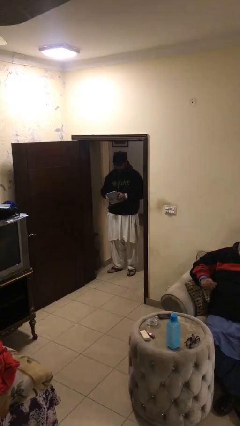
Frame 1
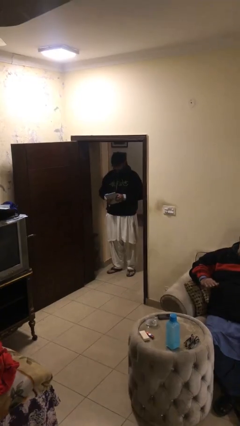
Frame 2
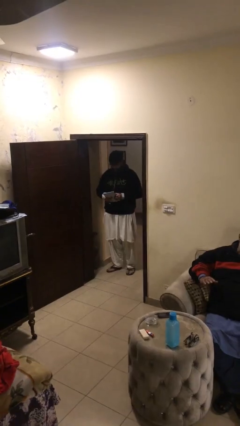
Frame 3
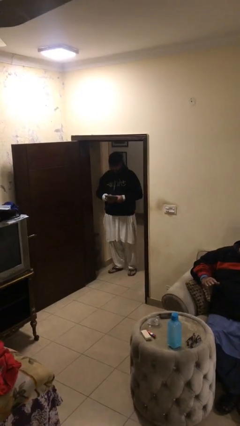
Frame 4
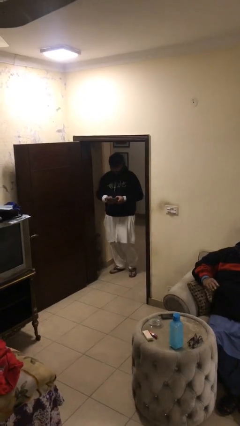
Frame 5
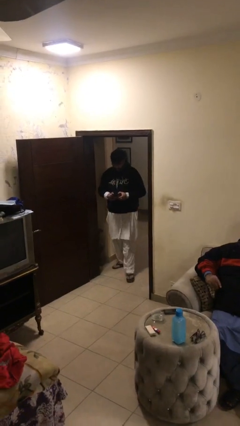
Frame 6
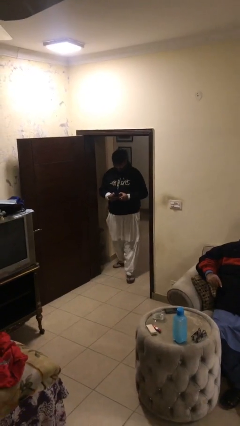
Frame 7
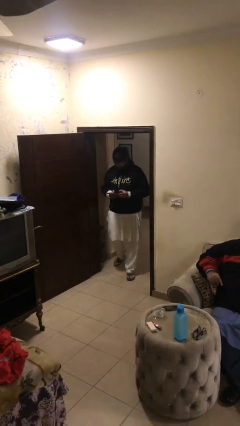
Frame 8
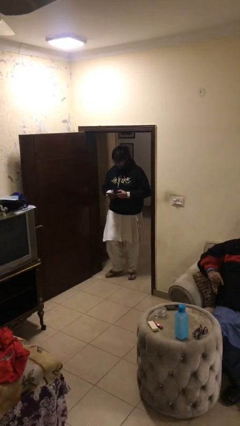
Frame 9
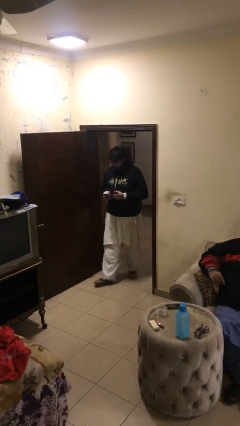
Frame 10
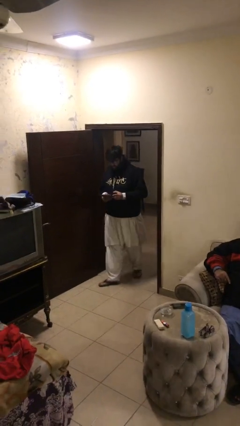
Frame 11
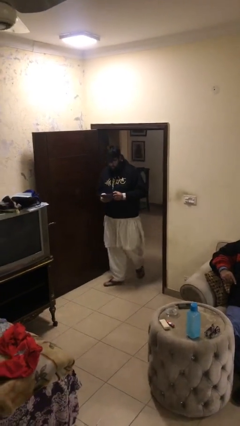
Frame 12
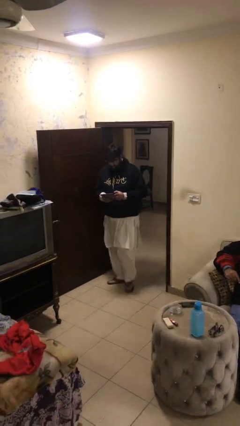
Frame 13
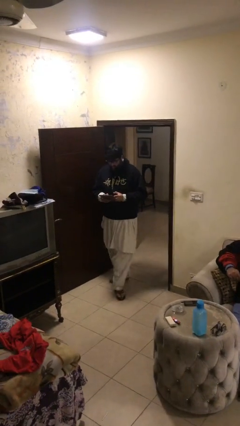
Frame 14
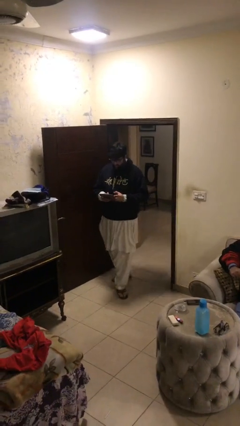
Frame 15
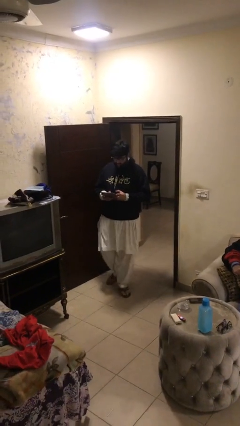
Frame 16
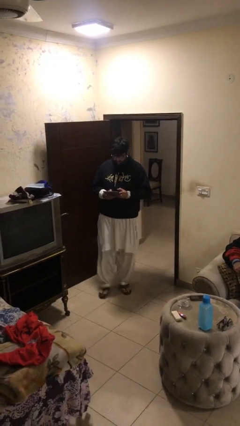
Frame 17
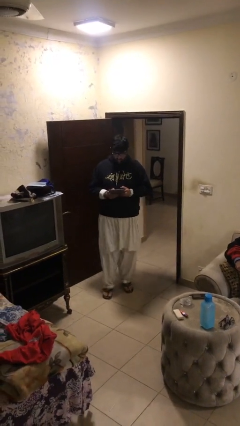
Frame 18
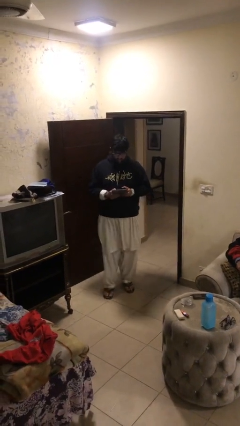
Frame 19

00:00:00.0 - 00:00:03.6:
person enters scene through structure

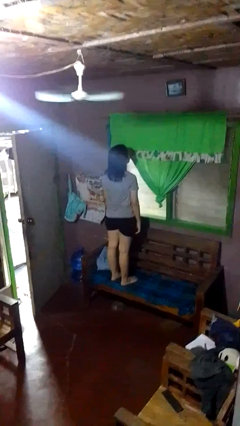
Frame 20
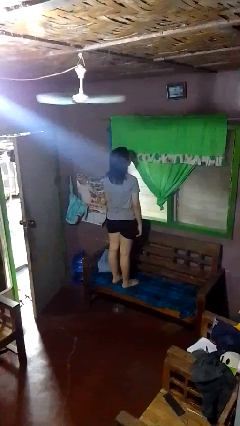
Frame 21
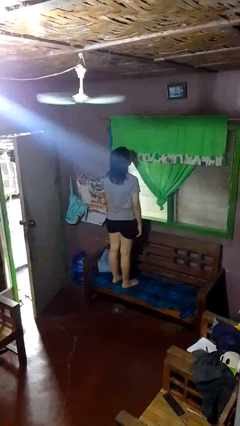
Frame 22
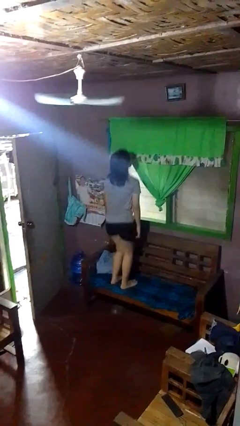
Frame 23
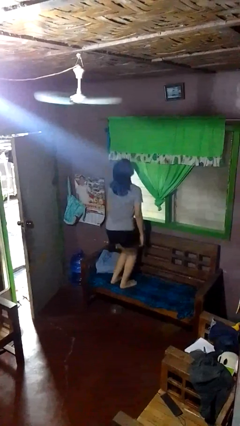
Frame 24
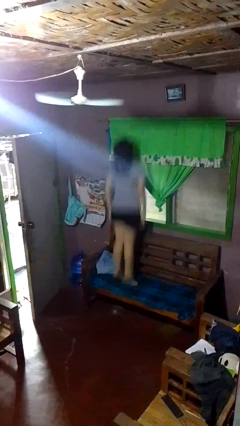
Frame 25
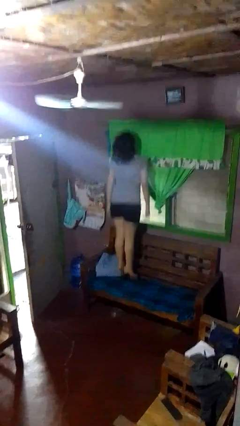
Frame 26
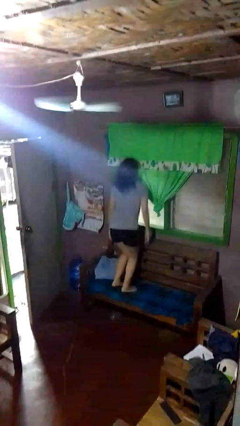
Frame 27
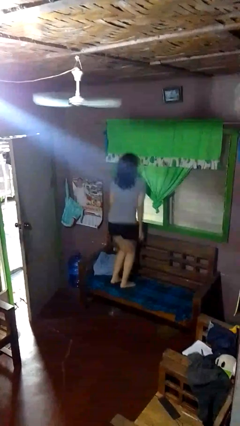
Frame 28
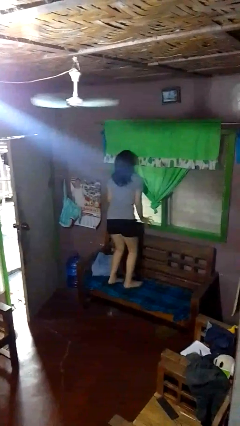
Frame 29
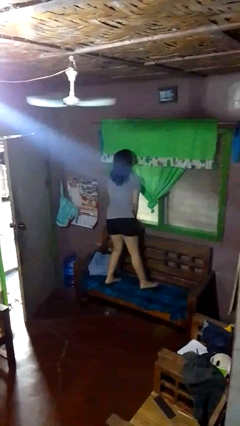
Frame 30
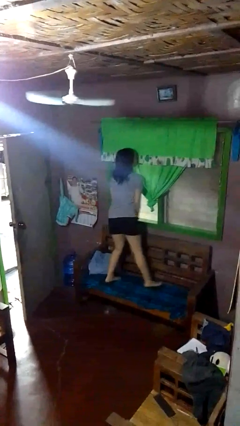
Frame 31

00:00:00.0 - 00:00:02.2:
person jumps on couch

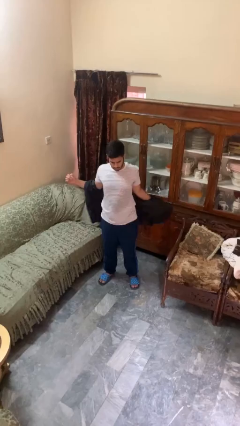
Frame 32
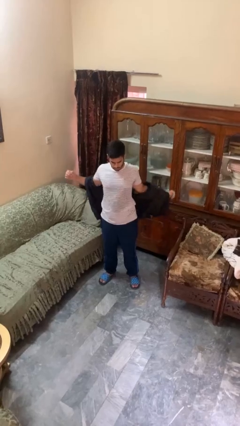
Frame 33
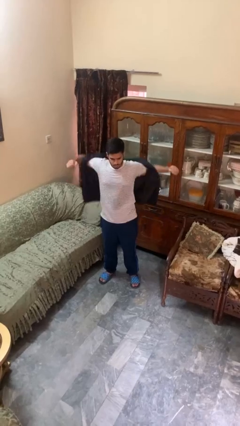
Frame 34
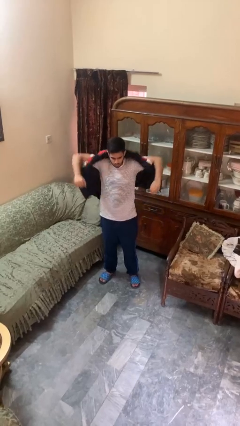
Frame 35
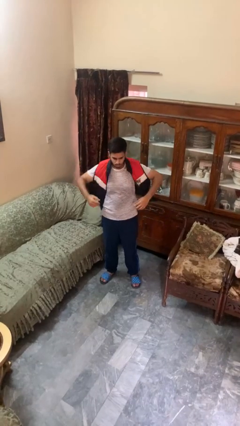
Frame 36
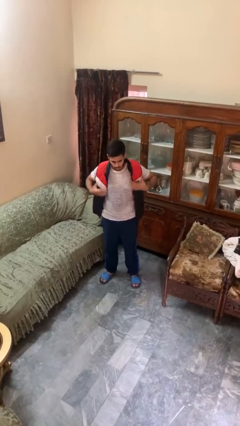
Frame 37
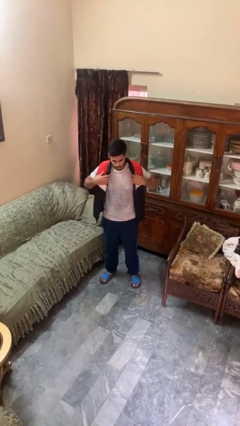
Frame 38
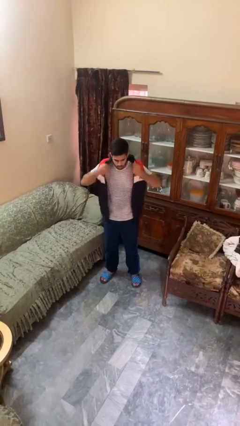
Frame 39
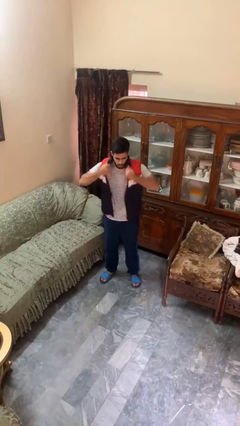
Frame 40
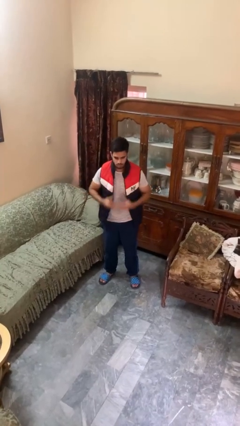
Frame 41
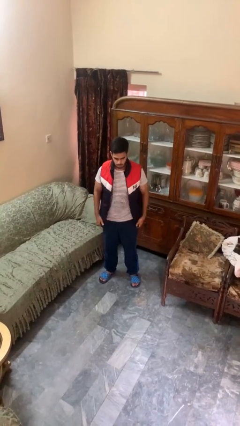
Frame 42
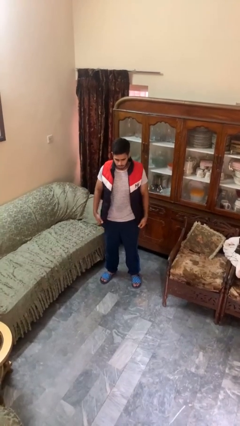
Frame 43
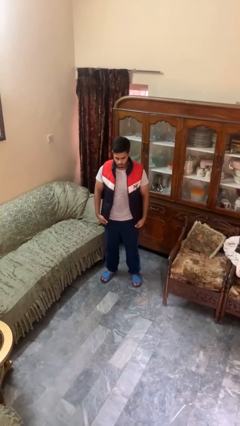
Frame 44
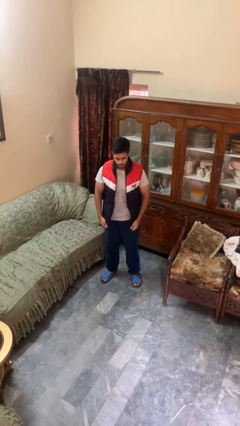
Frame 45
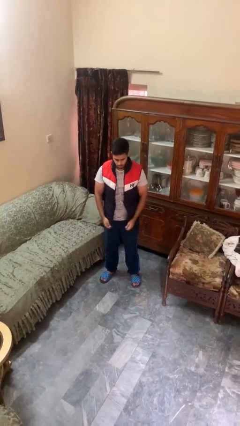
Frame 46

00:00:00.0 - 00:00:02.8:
person puts on jacket

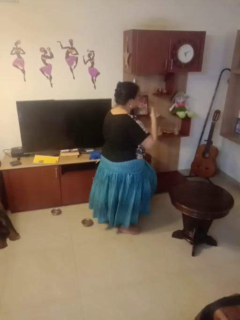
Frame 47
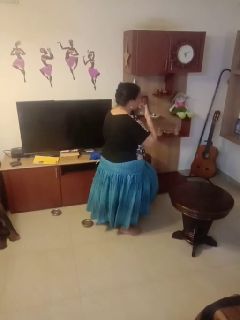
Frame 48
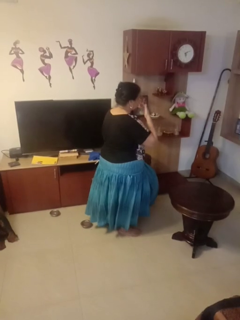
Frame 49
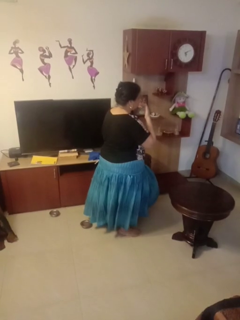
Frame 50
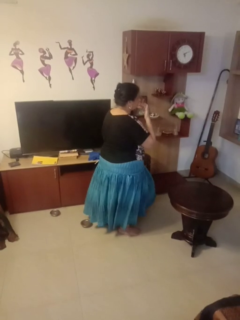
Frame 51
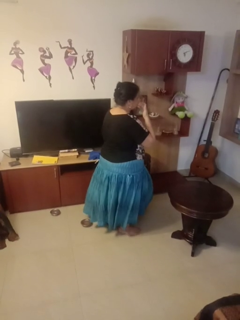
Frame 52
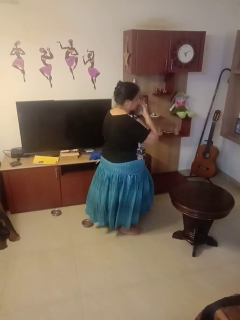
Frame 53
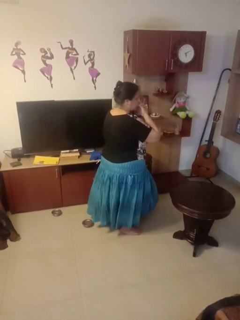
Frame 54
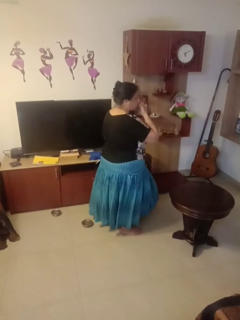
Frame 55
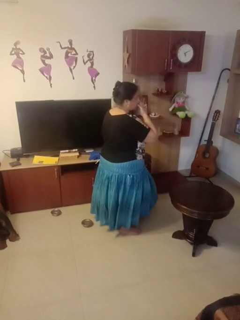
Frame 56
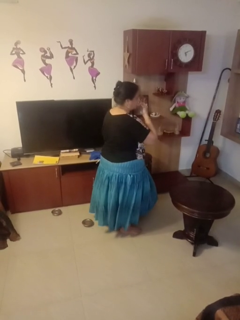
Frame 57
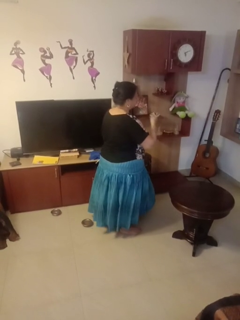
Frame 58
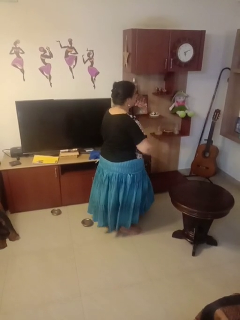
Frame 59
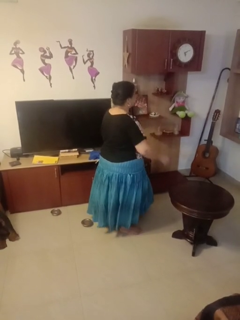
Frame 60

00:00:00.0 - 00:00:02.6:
person licks fingers

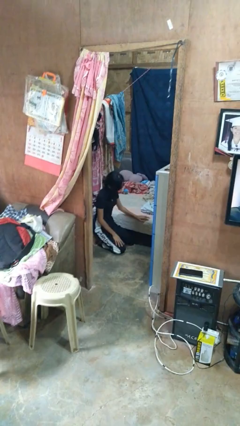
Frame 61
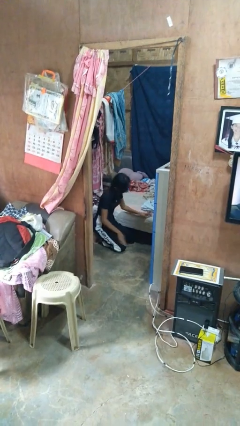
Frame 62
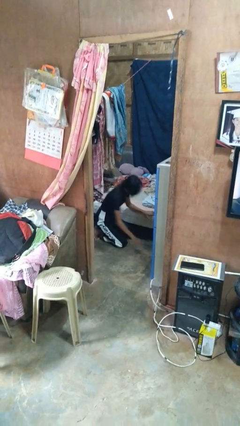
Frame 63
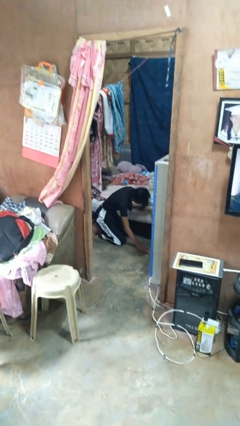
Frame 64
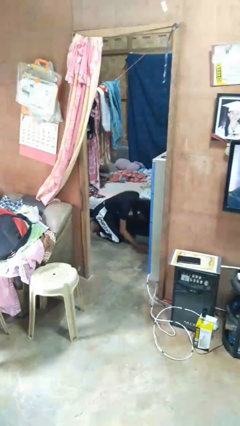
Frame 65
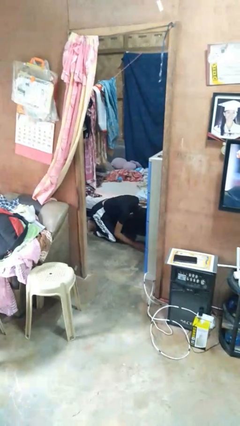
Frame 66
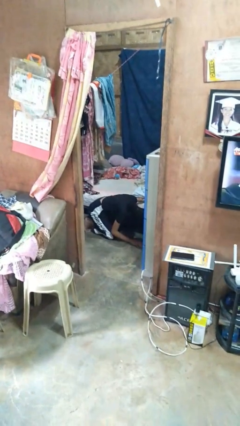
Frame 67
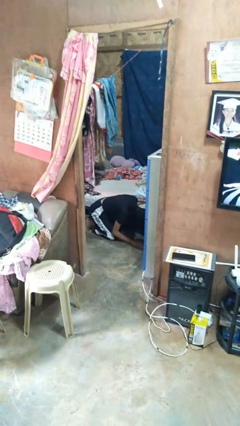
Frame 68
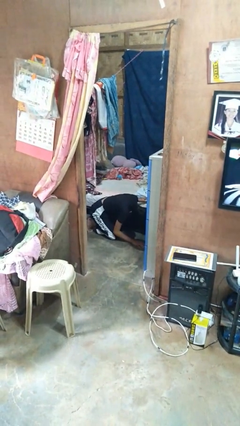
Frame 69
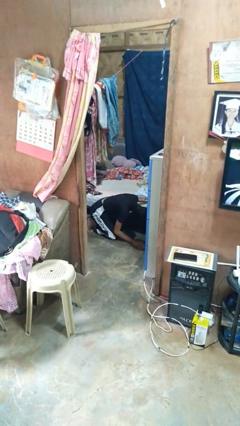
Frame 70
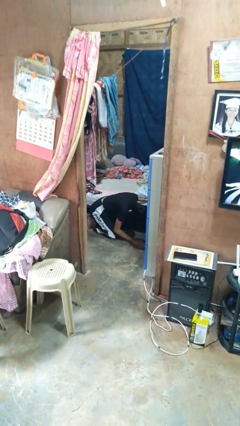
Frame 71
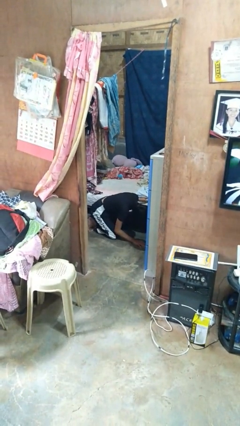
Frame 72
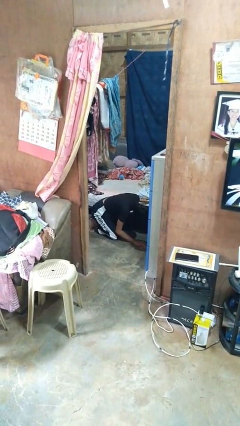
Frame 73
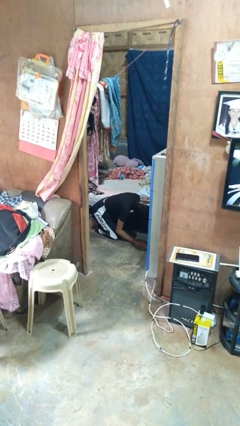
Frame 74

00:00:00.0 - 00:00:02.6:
person searches under bed

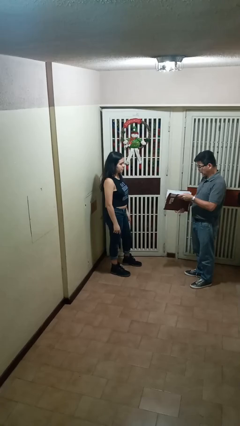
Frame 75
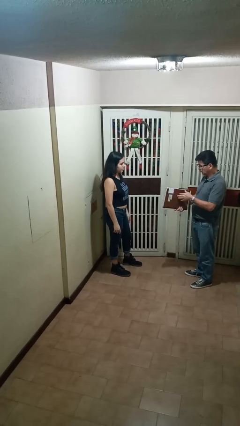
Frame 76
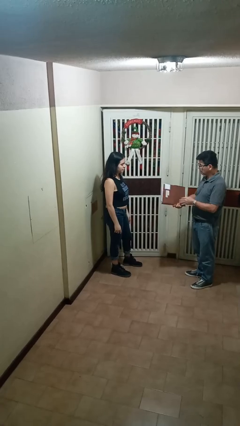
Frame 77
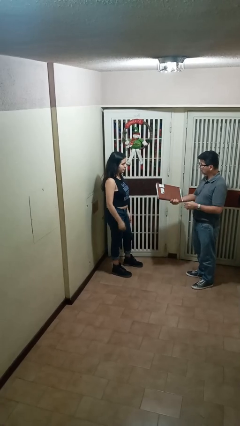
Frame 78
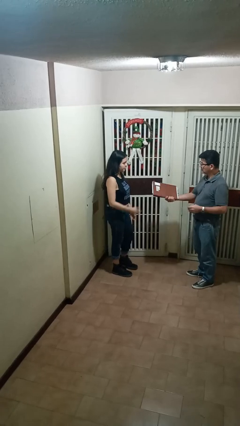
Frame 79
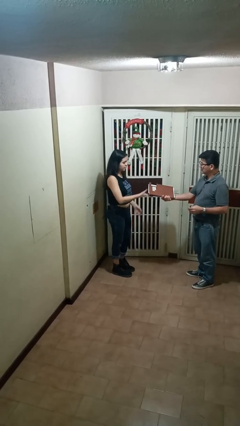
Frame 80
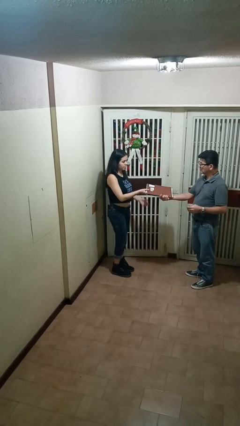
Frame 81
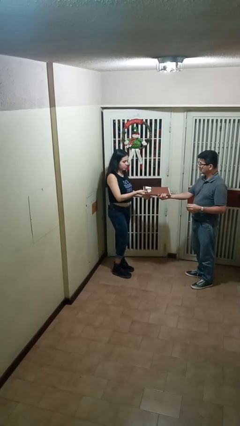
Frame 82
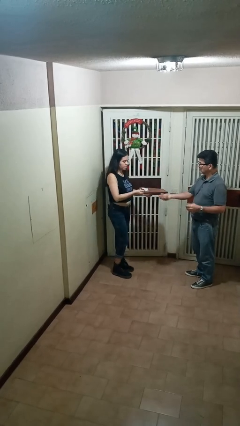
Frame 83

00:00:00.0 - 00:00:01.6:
person transfers object to person

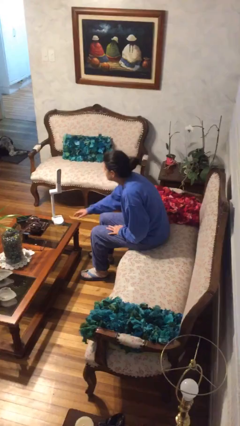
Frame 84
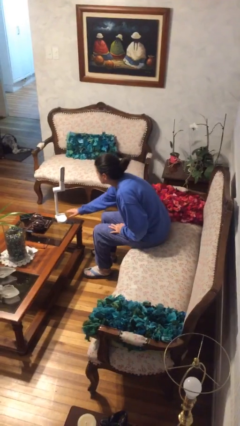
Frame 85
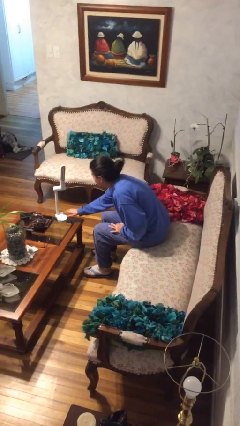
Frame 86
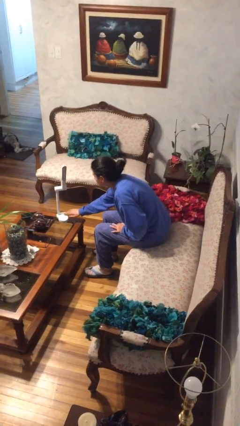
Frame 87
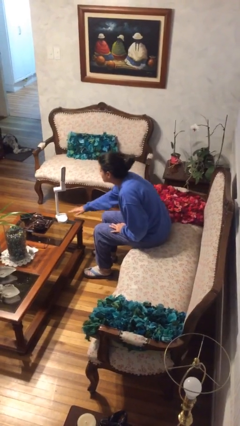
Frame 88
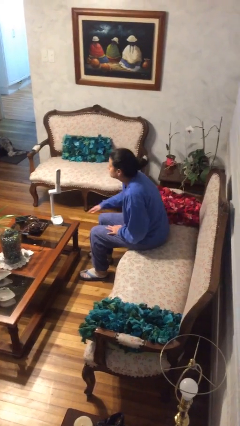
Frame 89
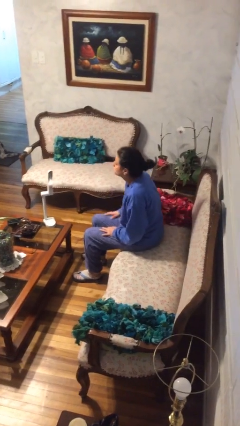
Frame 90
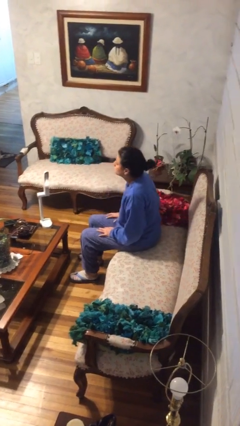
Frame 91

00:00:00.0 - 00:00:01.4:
person turns on lamp

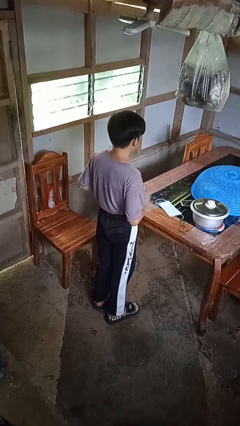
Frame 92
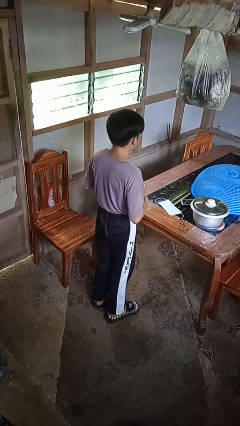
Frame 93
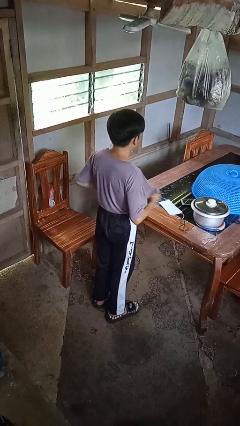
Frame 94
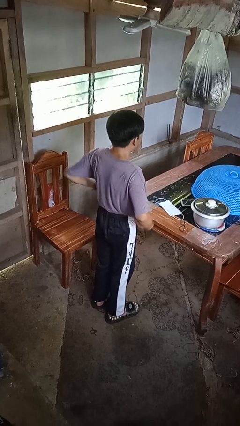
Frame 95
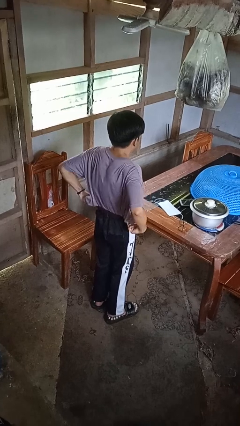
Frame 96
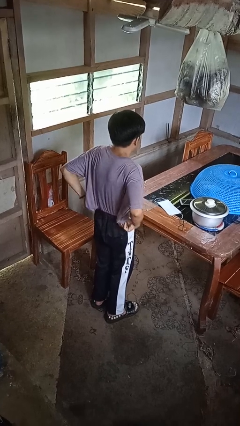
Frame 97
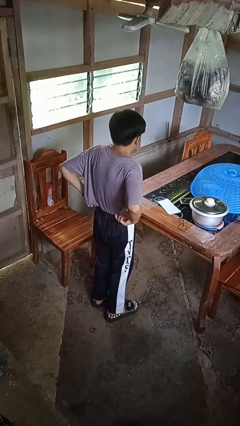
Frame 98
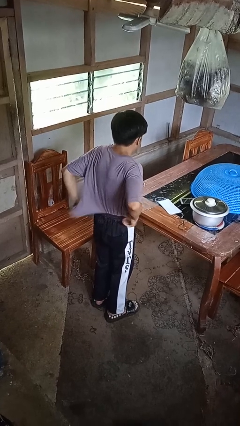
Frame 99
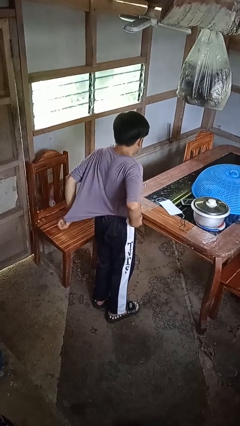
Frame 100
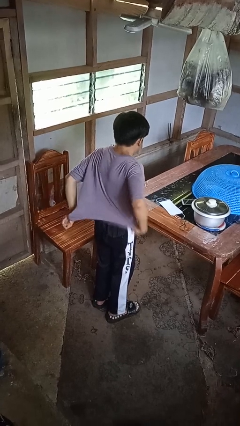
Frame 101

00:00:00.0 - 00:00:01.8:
person untucks shirt
